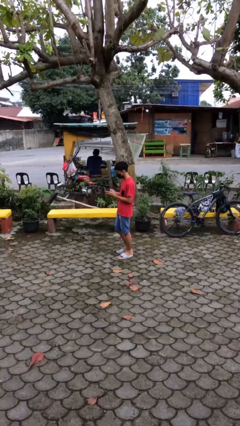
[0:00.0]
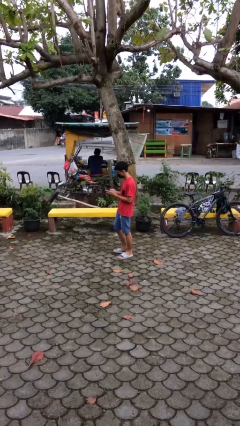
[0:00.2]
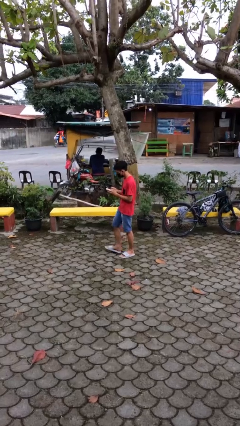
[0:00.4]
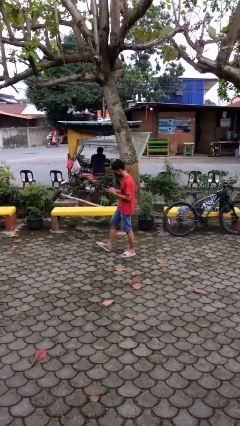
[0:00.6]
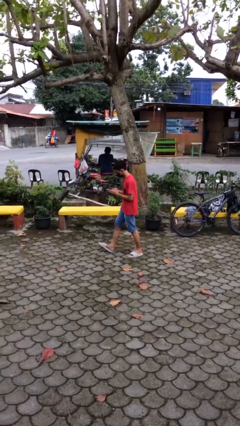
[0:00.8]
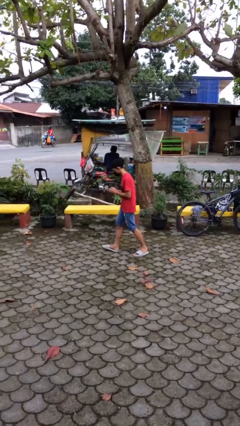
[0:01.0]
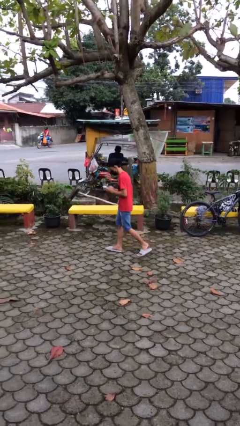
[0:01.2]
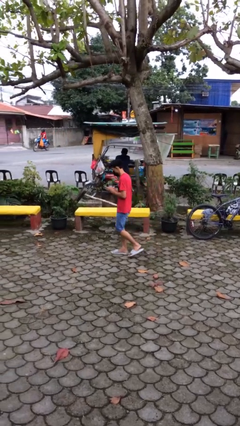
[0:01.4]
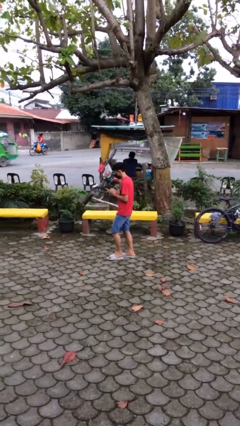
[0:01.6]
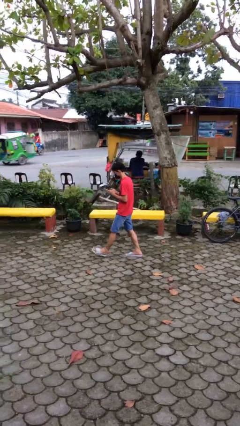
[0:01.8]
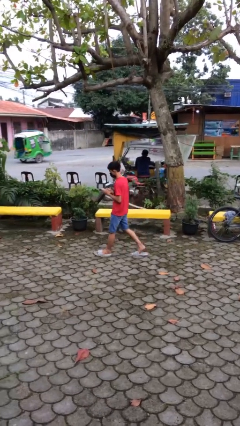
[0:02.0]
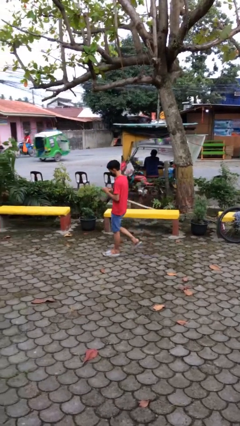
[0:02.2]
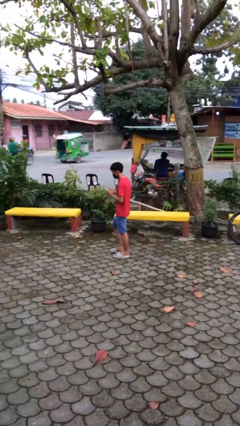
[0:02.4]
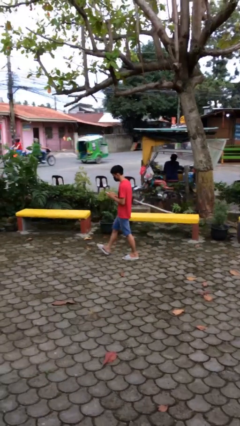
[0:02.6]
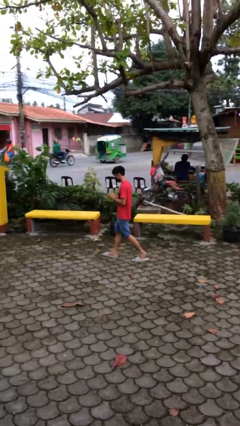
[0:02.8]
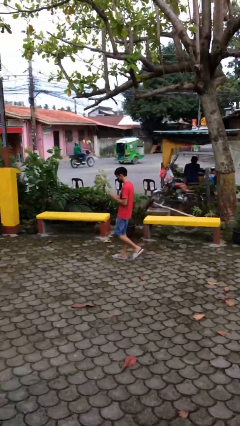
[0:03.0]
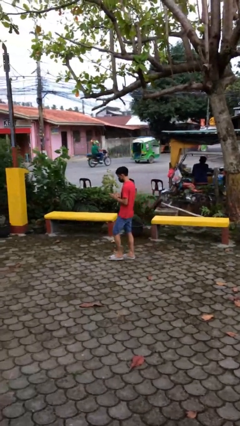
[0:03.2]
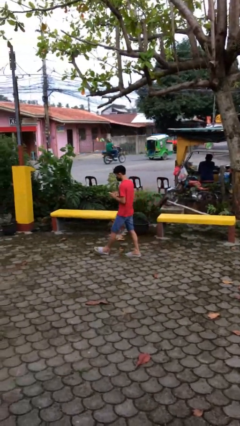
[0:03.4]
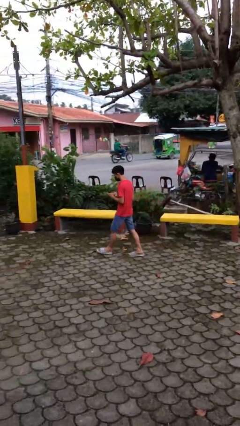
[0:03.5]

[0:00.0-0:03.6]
person texts on phone

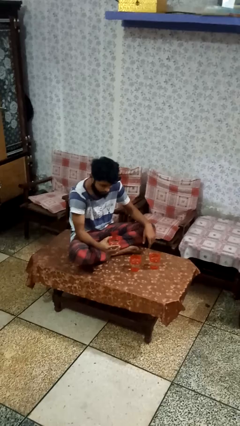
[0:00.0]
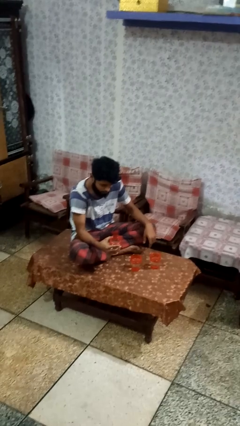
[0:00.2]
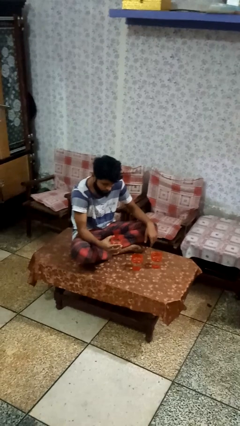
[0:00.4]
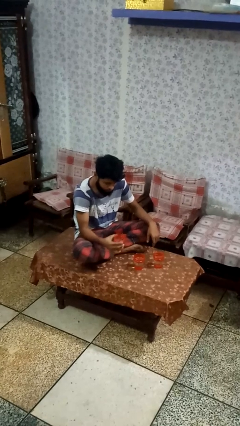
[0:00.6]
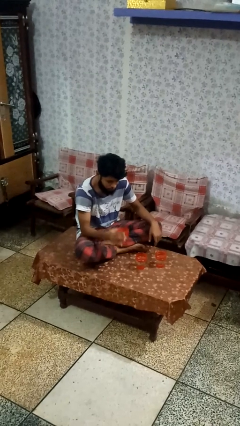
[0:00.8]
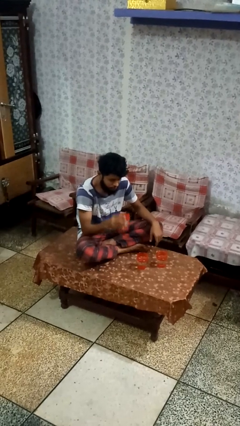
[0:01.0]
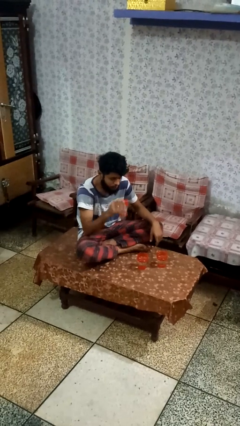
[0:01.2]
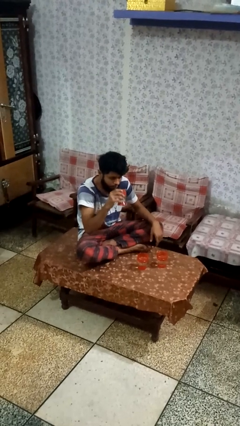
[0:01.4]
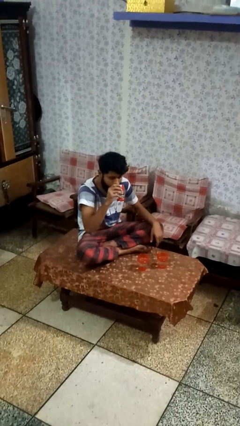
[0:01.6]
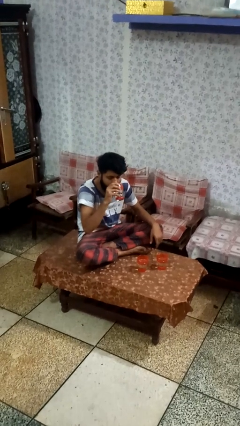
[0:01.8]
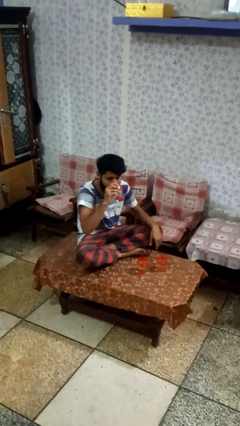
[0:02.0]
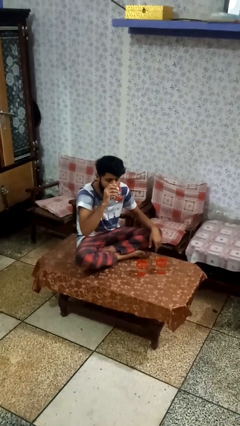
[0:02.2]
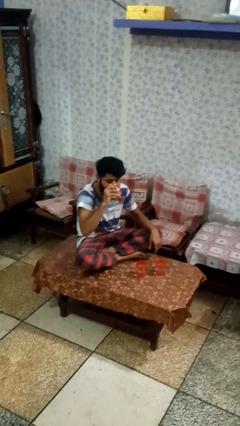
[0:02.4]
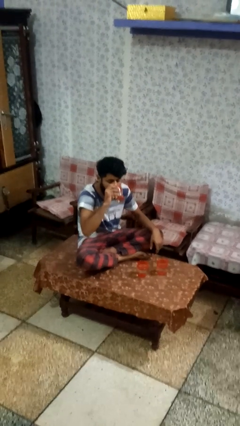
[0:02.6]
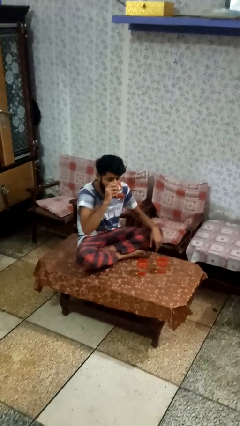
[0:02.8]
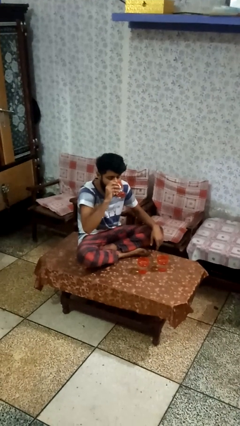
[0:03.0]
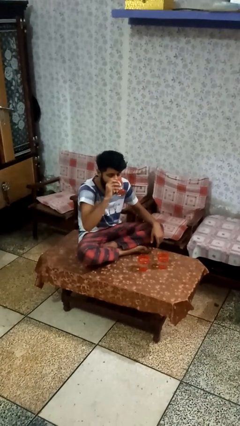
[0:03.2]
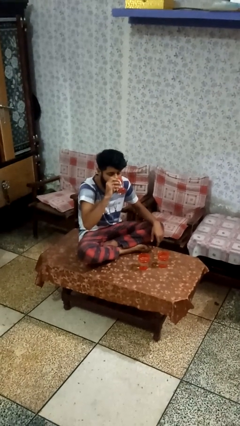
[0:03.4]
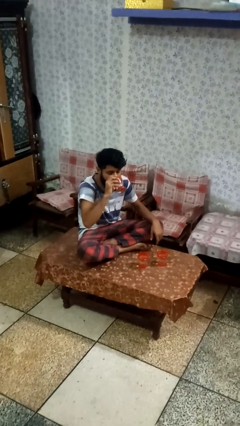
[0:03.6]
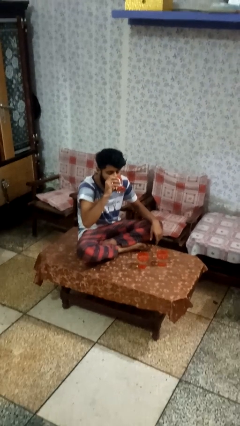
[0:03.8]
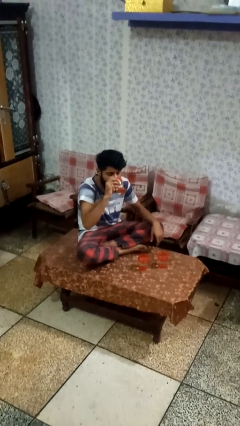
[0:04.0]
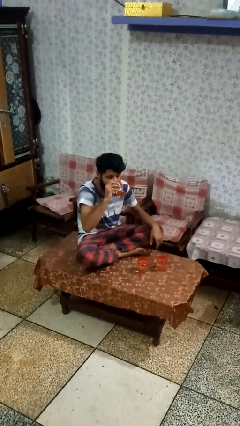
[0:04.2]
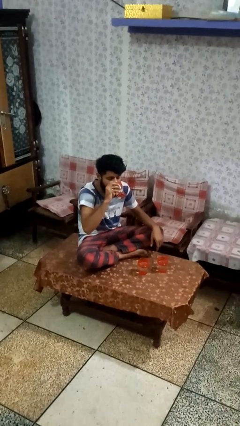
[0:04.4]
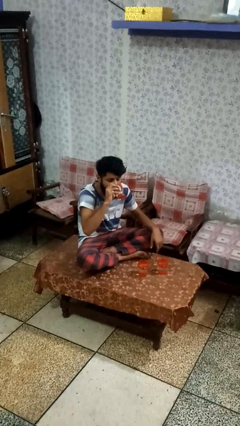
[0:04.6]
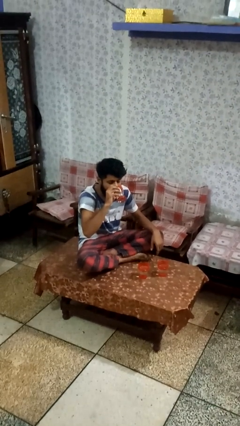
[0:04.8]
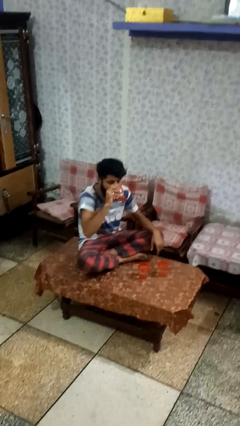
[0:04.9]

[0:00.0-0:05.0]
person drinks from shotglass

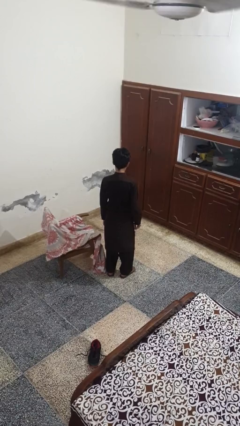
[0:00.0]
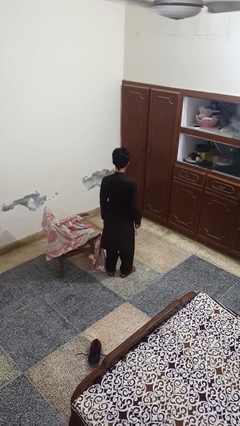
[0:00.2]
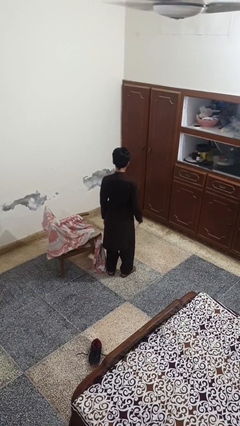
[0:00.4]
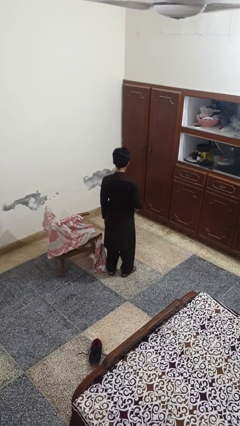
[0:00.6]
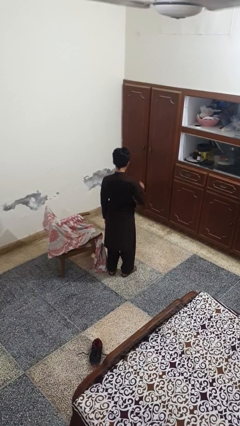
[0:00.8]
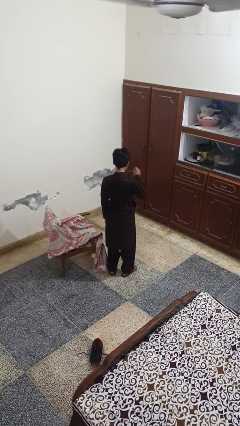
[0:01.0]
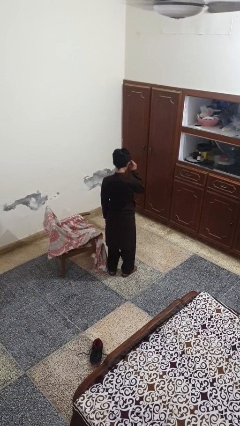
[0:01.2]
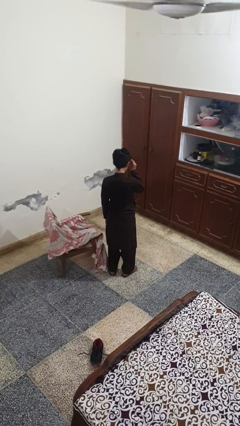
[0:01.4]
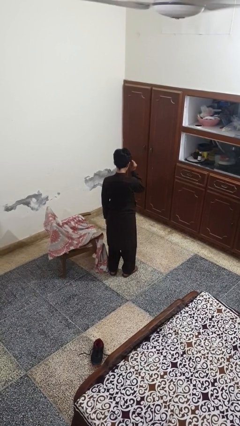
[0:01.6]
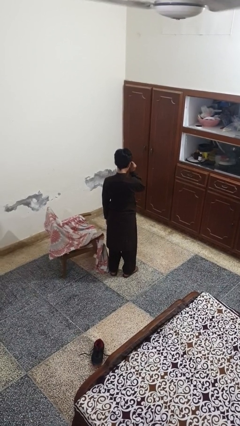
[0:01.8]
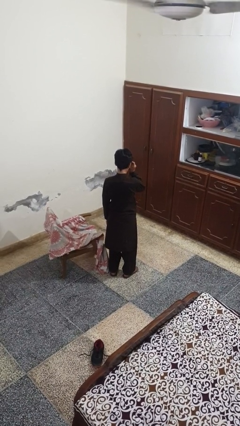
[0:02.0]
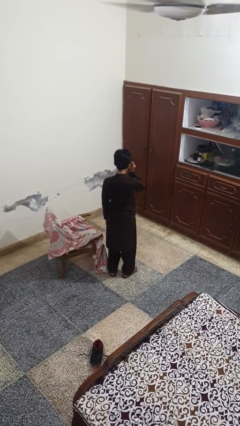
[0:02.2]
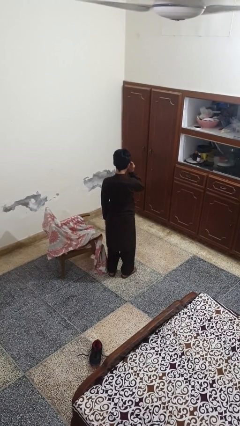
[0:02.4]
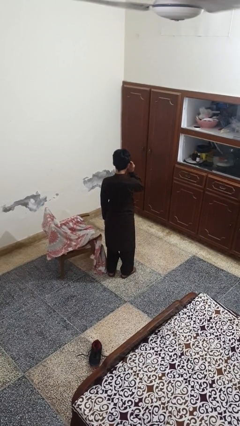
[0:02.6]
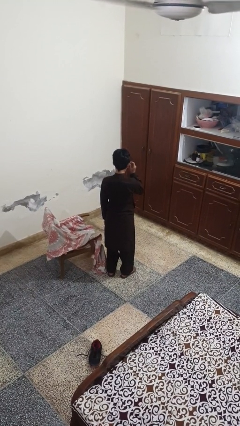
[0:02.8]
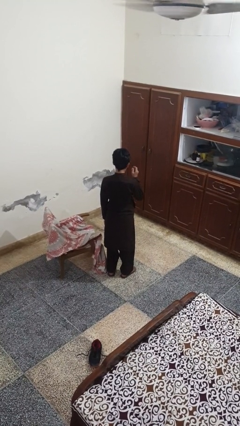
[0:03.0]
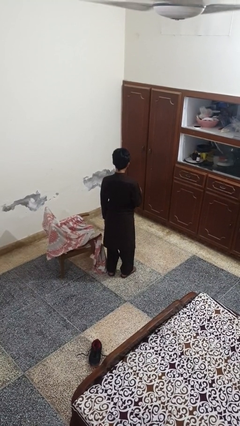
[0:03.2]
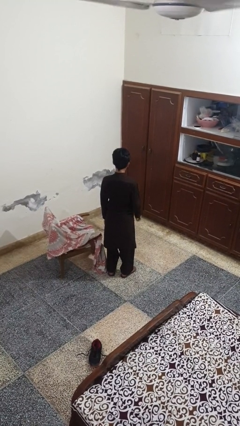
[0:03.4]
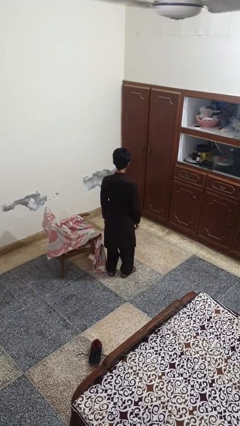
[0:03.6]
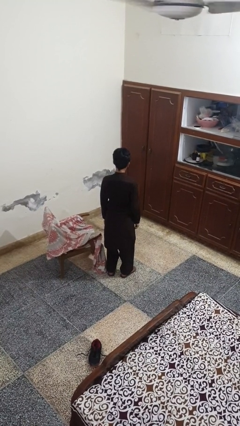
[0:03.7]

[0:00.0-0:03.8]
person puts on glasses

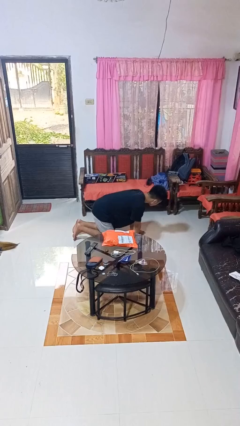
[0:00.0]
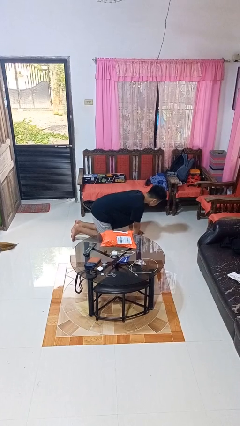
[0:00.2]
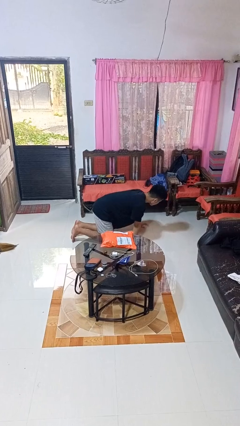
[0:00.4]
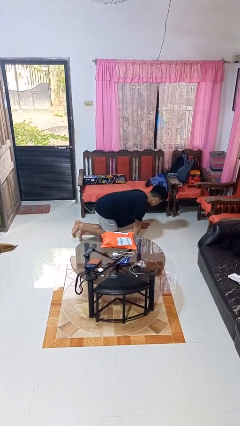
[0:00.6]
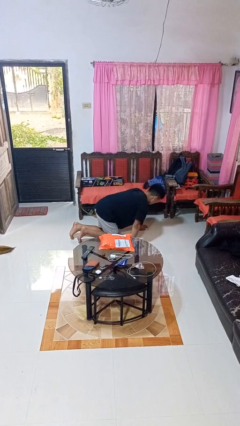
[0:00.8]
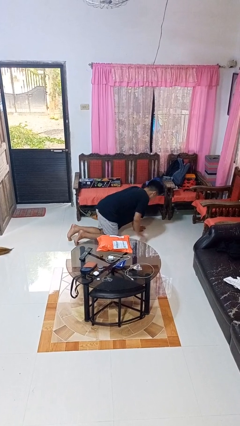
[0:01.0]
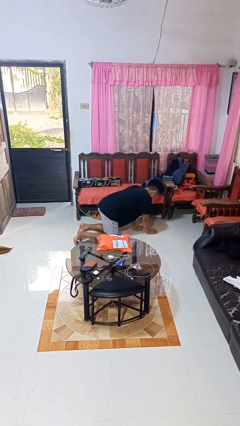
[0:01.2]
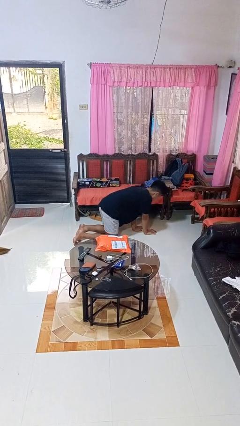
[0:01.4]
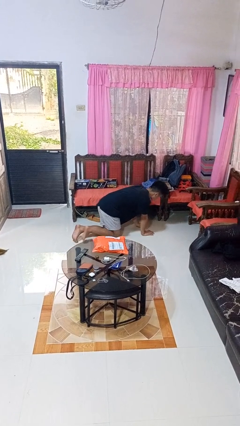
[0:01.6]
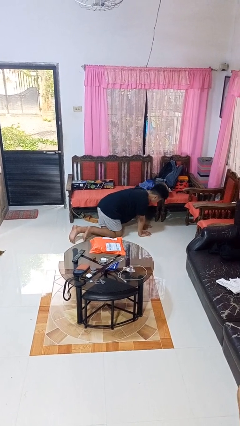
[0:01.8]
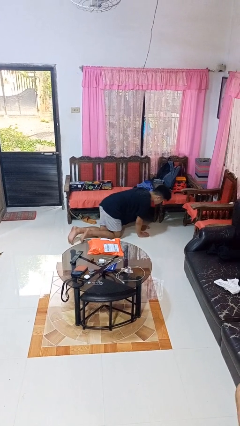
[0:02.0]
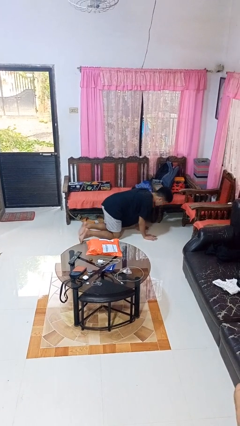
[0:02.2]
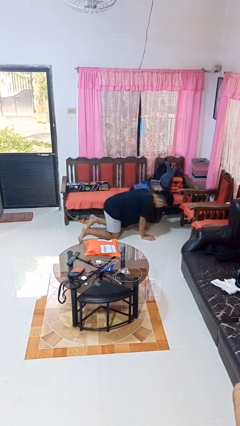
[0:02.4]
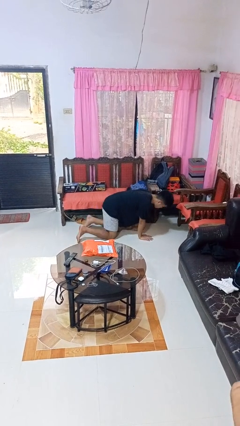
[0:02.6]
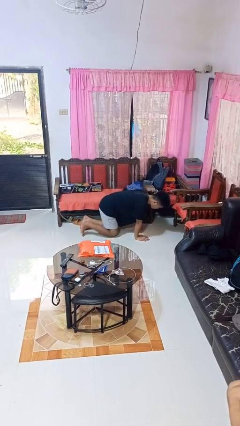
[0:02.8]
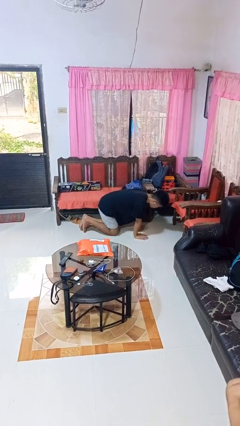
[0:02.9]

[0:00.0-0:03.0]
person crawls

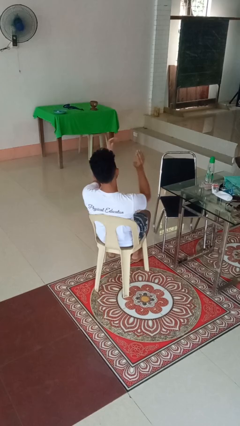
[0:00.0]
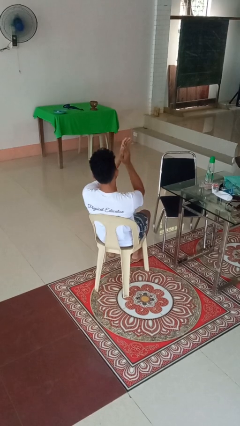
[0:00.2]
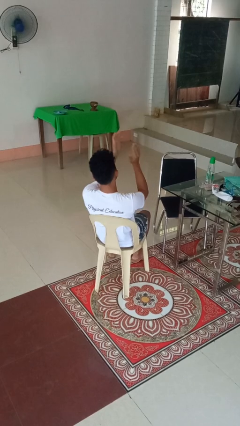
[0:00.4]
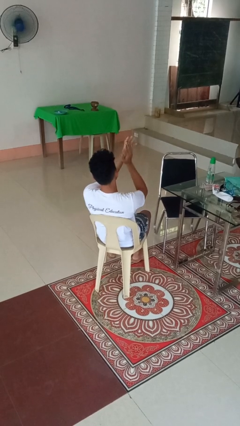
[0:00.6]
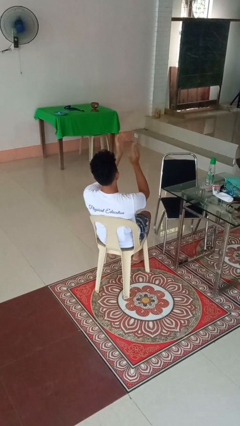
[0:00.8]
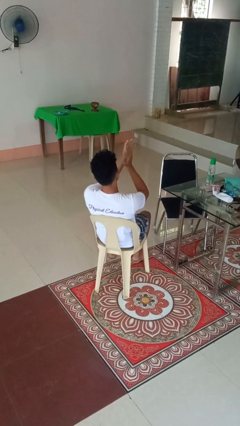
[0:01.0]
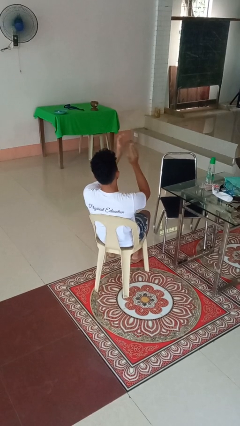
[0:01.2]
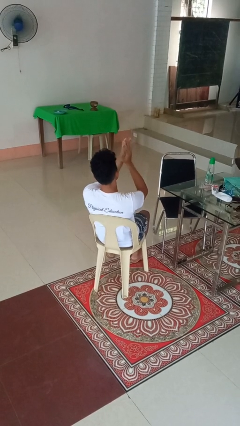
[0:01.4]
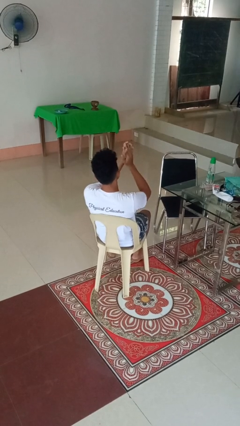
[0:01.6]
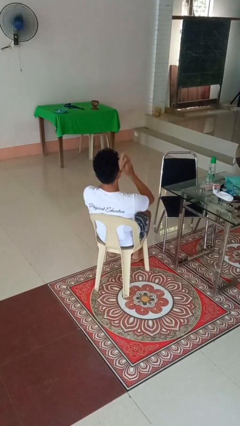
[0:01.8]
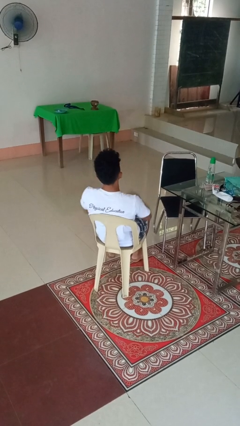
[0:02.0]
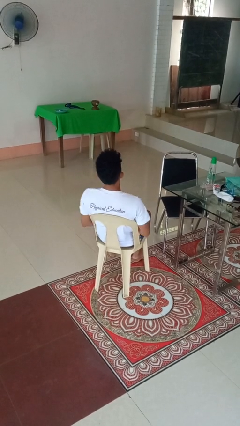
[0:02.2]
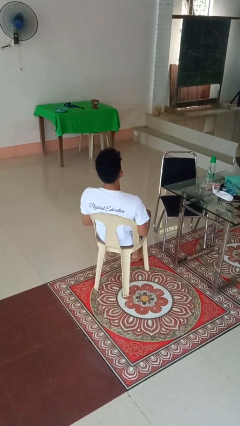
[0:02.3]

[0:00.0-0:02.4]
person claps hands
